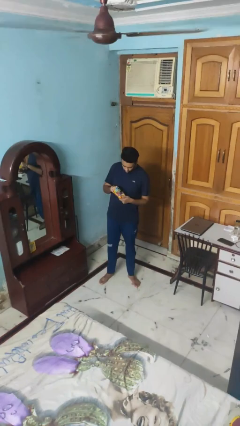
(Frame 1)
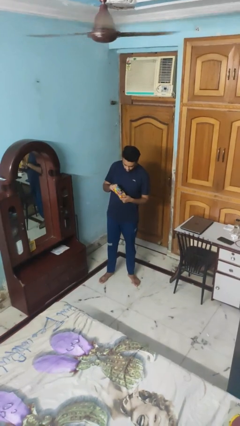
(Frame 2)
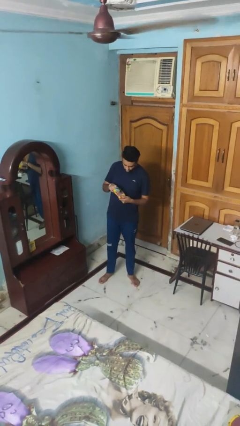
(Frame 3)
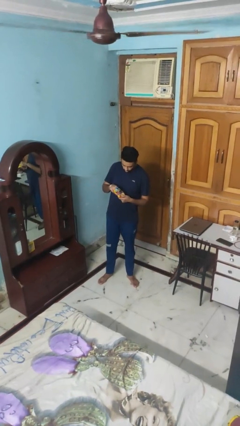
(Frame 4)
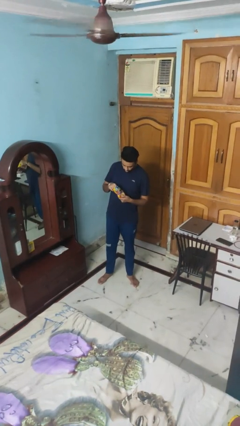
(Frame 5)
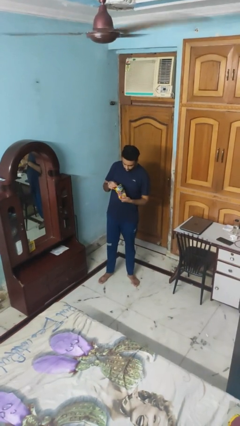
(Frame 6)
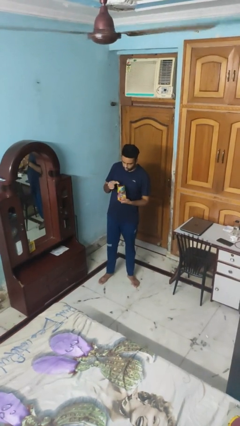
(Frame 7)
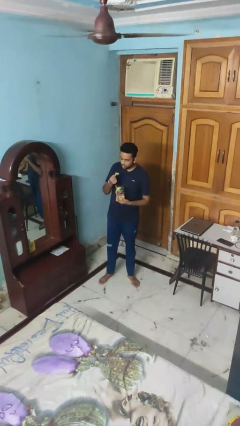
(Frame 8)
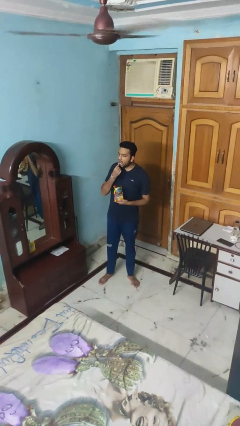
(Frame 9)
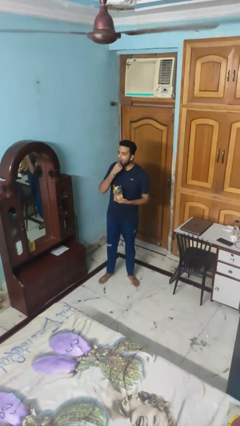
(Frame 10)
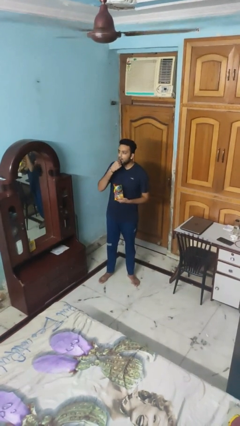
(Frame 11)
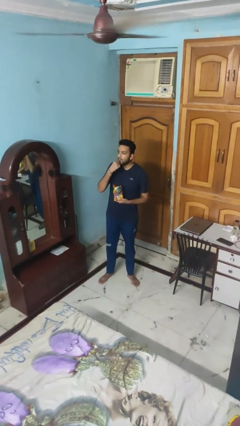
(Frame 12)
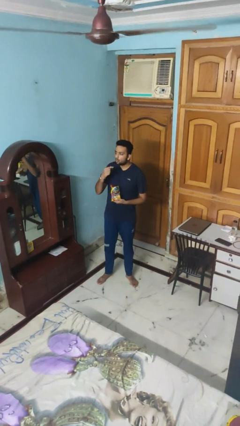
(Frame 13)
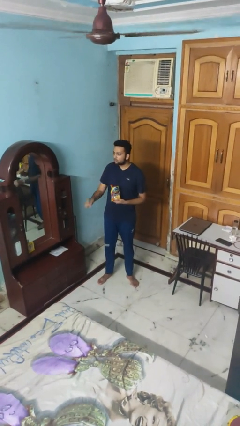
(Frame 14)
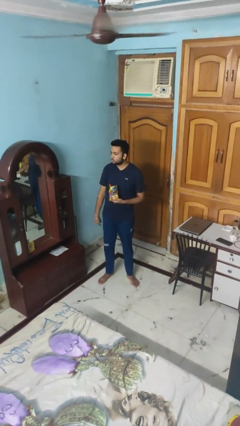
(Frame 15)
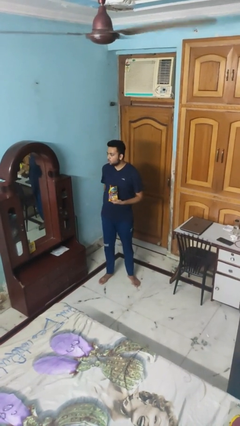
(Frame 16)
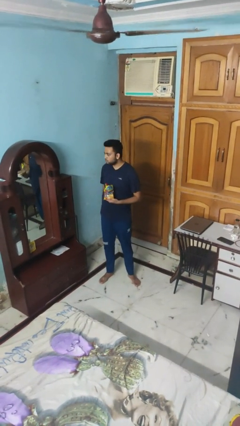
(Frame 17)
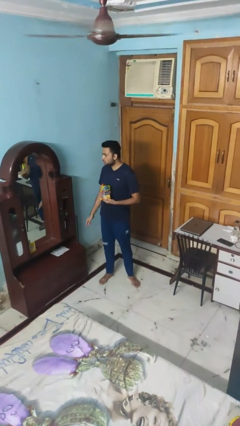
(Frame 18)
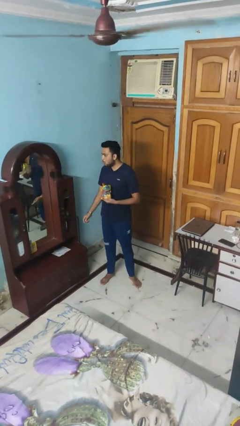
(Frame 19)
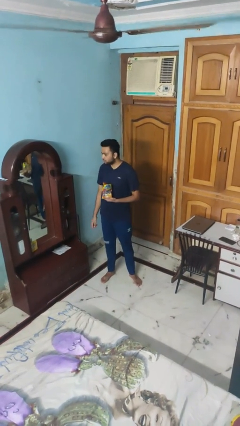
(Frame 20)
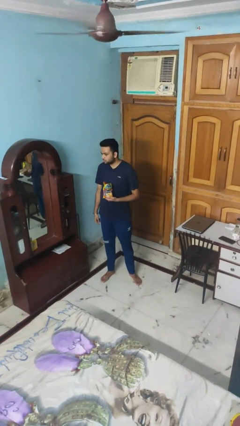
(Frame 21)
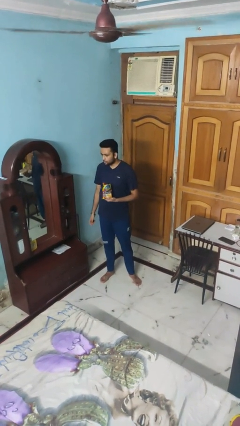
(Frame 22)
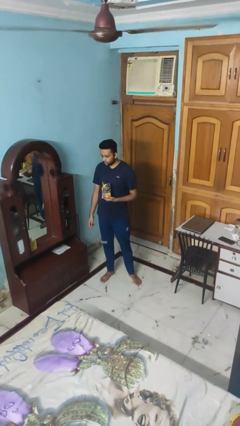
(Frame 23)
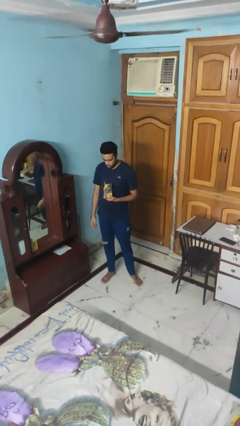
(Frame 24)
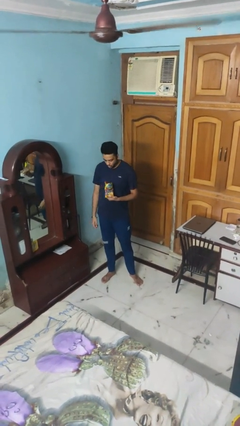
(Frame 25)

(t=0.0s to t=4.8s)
person eats snack from bag

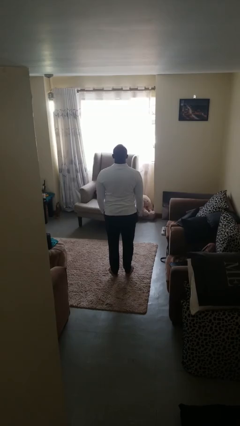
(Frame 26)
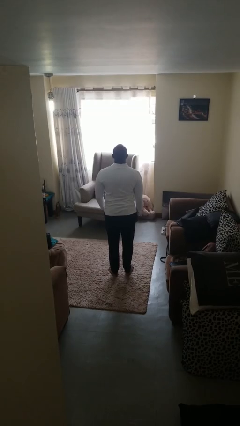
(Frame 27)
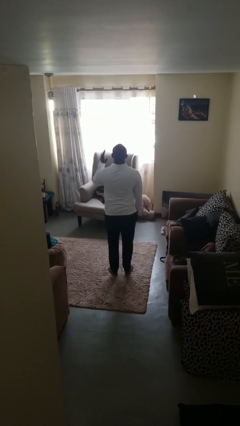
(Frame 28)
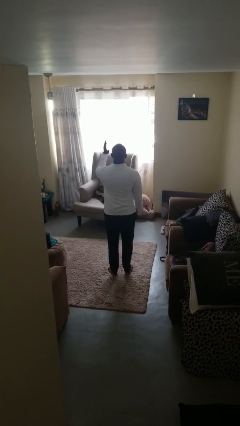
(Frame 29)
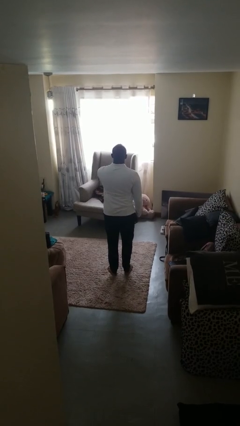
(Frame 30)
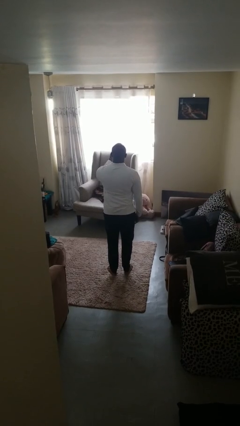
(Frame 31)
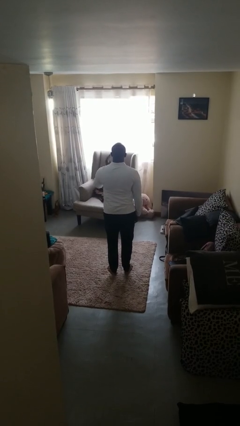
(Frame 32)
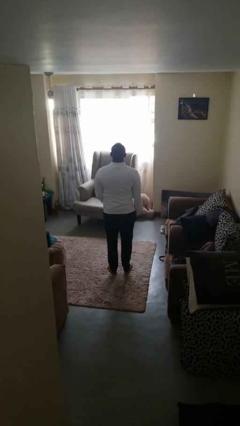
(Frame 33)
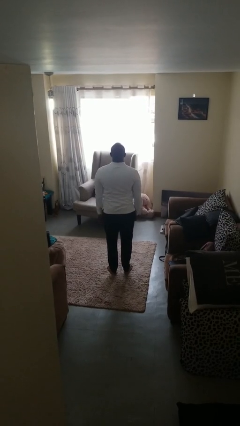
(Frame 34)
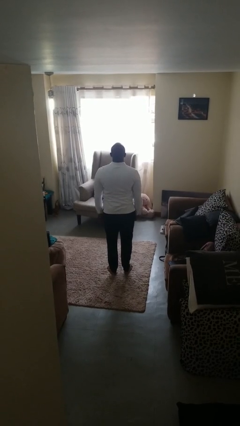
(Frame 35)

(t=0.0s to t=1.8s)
person karate chop

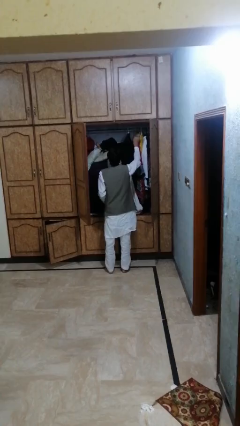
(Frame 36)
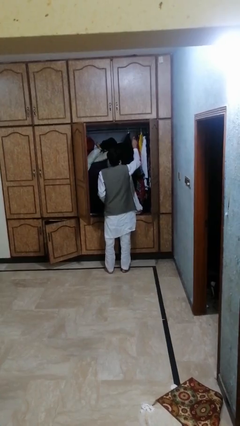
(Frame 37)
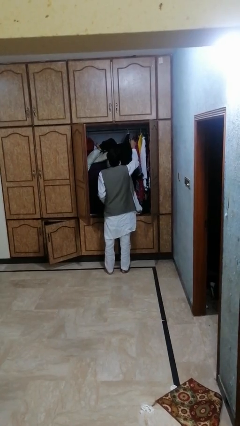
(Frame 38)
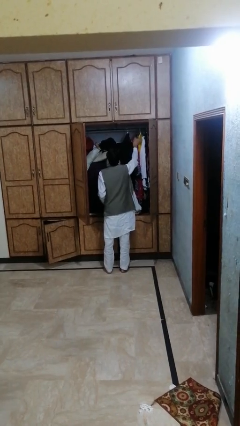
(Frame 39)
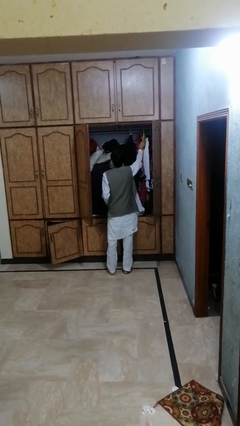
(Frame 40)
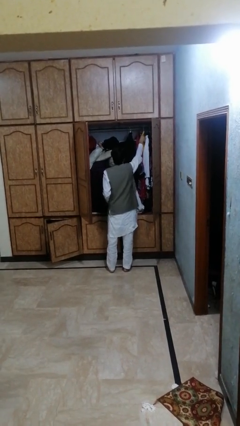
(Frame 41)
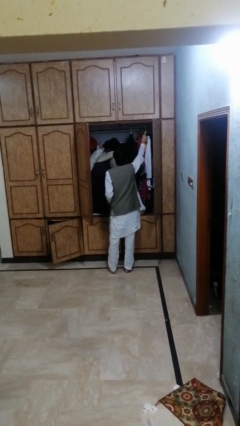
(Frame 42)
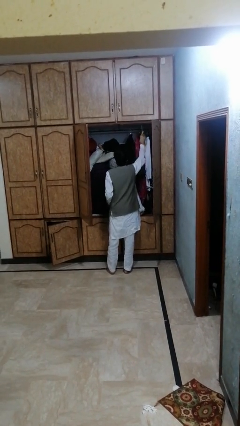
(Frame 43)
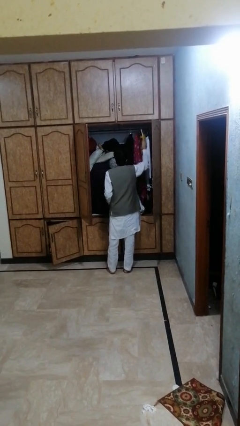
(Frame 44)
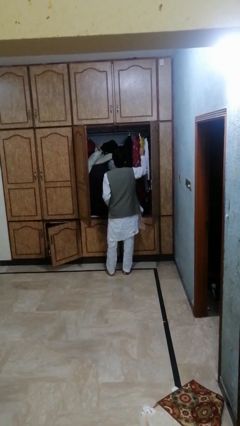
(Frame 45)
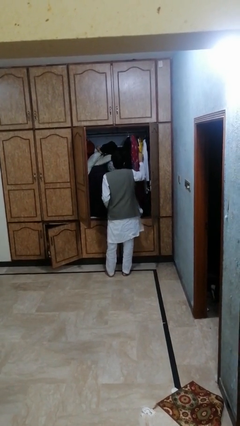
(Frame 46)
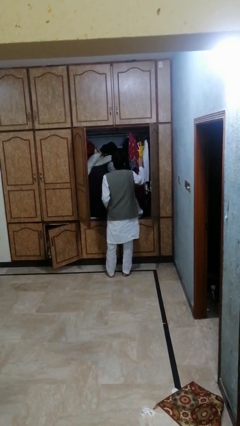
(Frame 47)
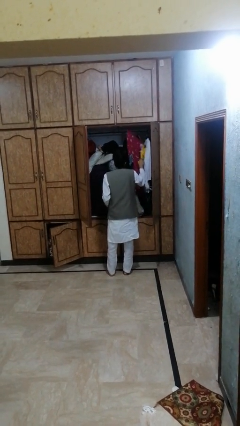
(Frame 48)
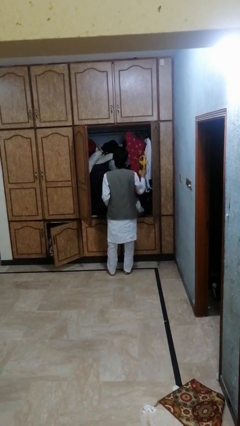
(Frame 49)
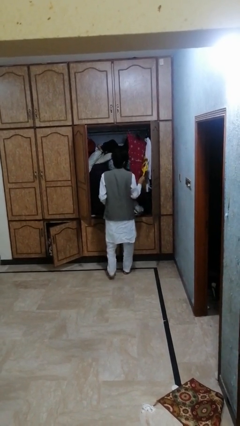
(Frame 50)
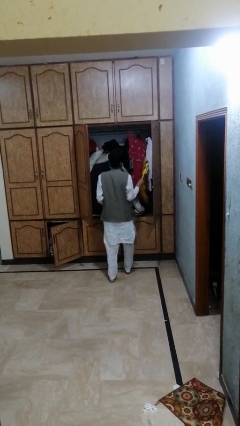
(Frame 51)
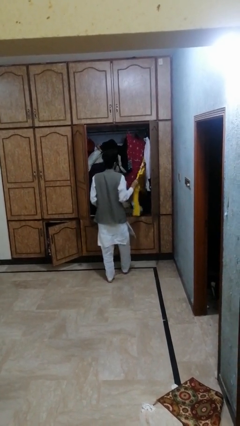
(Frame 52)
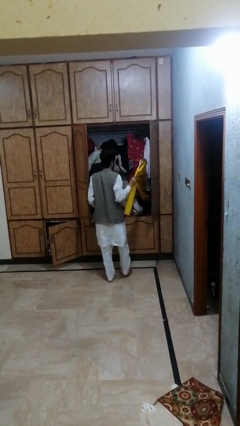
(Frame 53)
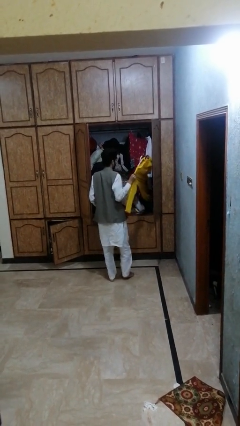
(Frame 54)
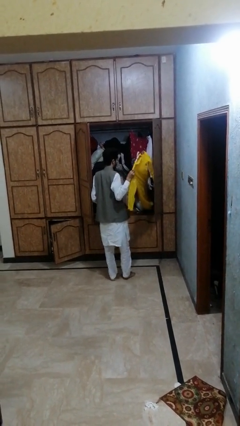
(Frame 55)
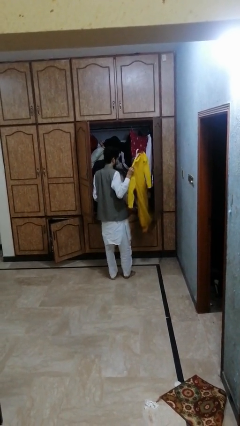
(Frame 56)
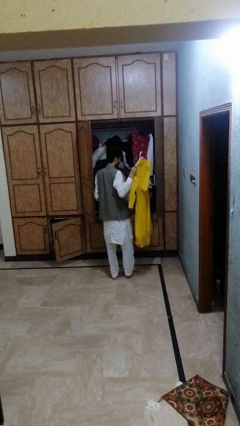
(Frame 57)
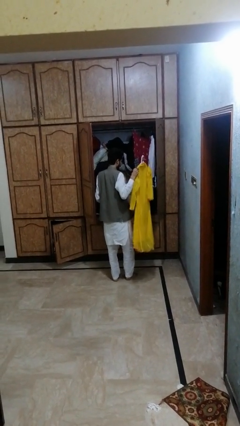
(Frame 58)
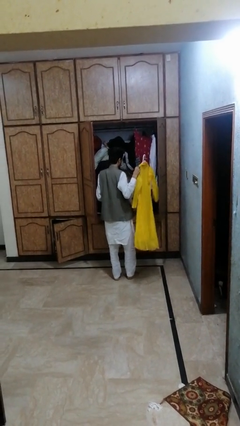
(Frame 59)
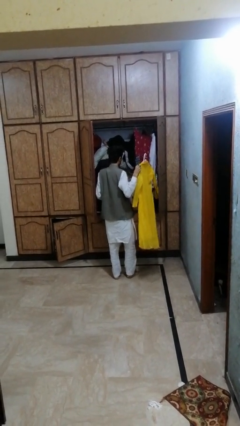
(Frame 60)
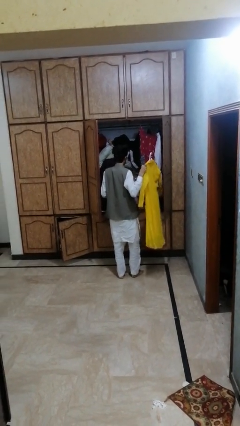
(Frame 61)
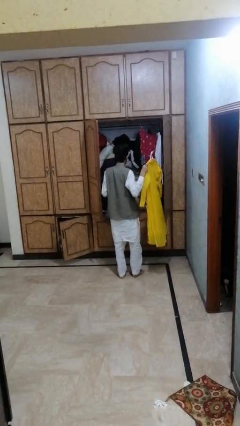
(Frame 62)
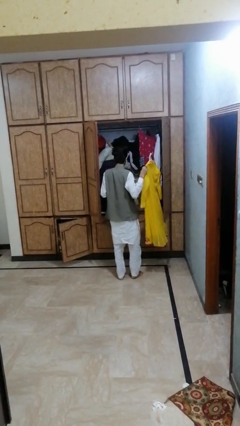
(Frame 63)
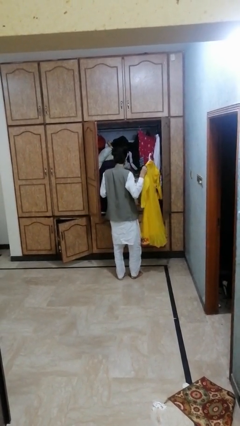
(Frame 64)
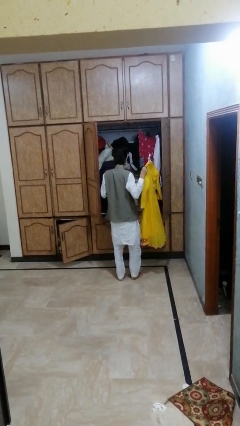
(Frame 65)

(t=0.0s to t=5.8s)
person takes clothes from dresser

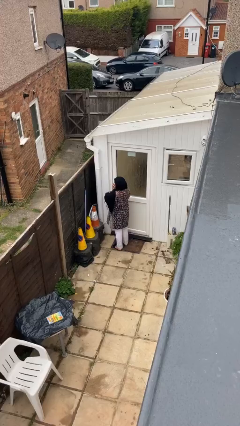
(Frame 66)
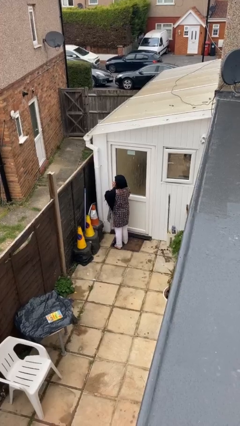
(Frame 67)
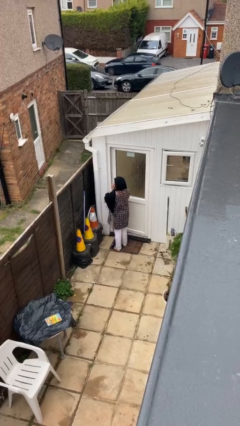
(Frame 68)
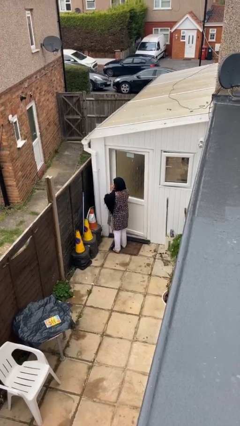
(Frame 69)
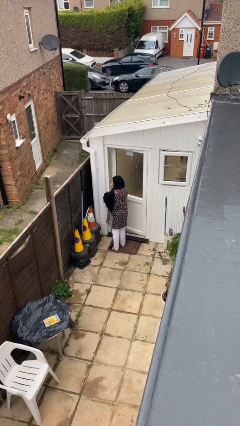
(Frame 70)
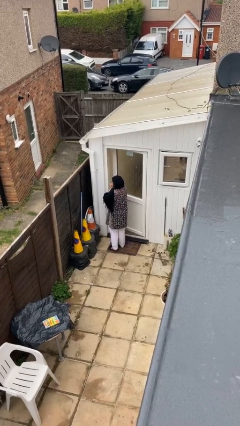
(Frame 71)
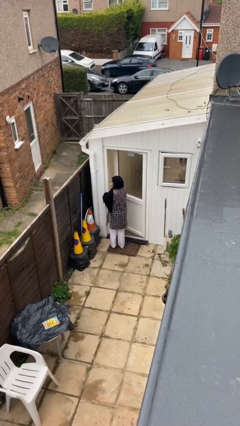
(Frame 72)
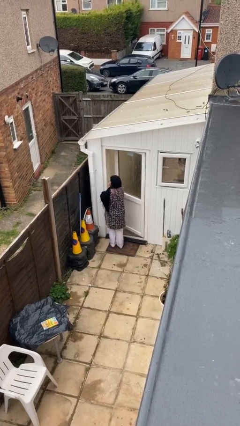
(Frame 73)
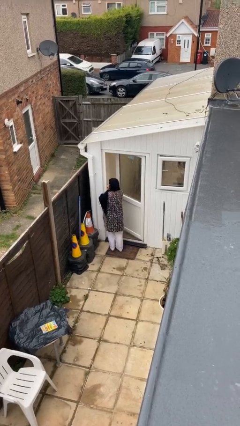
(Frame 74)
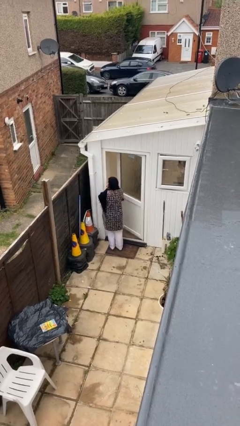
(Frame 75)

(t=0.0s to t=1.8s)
person opens facility door

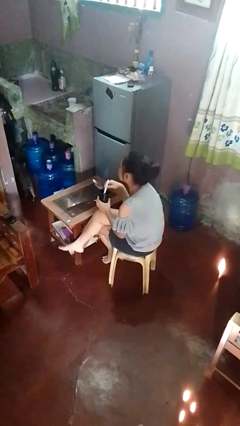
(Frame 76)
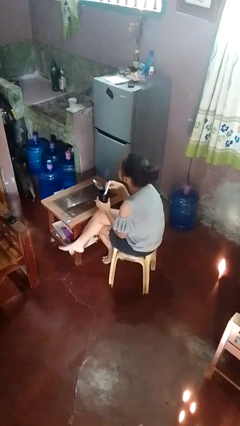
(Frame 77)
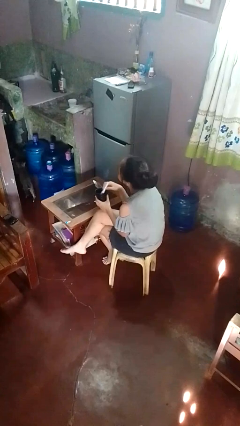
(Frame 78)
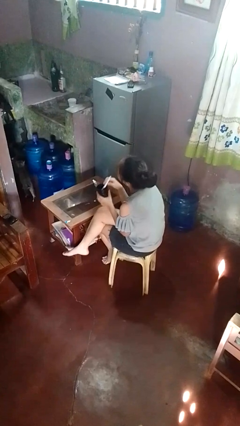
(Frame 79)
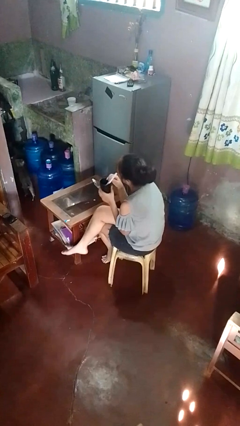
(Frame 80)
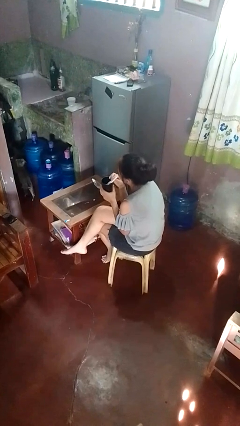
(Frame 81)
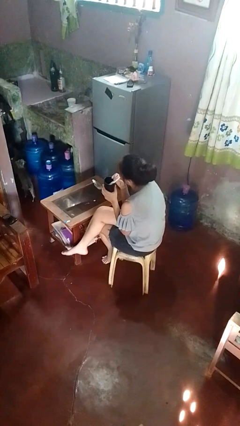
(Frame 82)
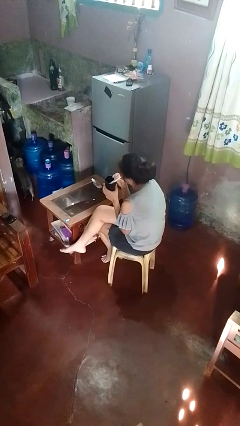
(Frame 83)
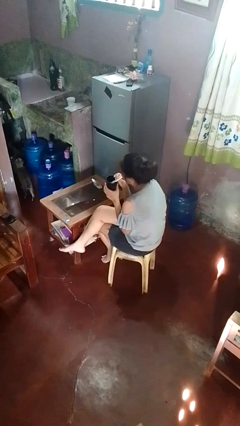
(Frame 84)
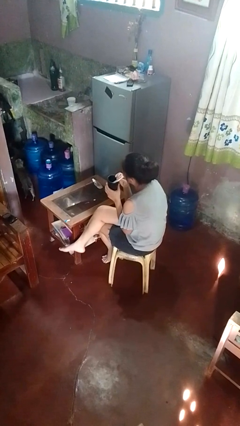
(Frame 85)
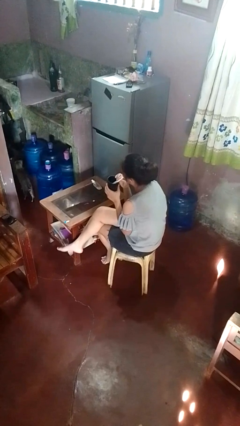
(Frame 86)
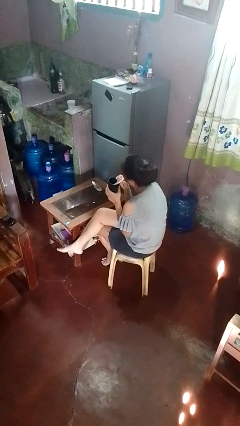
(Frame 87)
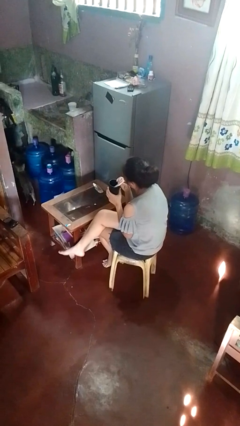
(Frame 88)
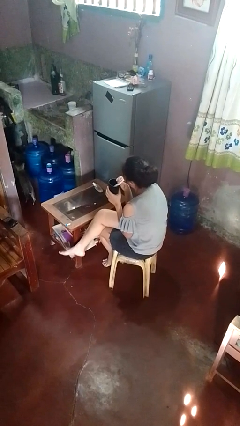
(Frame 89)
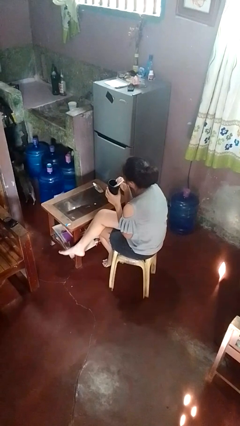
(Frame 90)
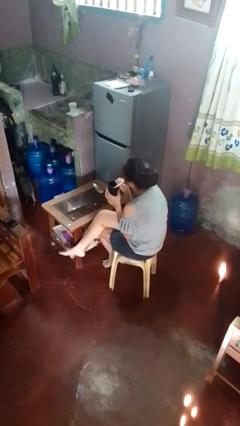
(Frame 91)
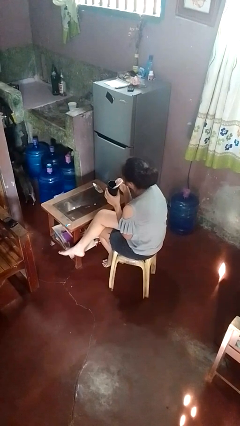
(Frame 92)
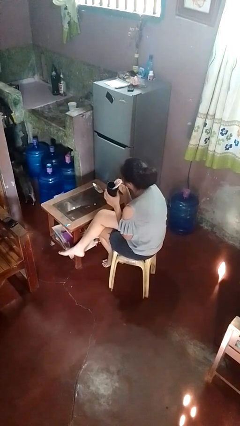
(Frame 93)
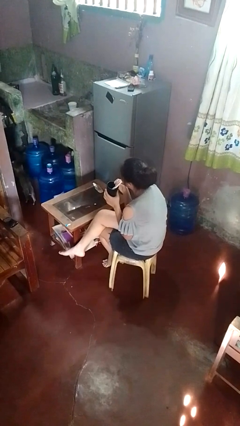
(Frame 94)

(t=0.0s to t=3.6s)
person drinks from straw
